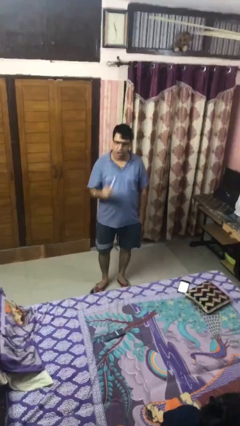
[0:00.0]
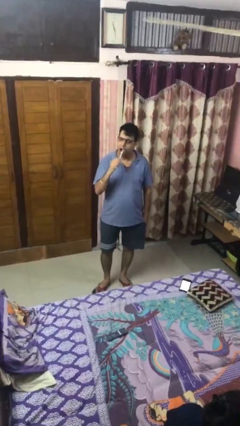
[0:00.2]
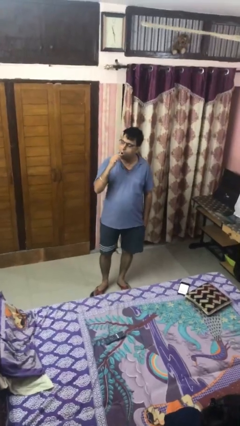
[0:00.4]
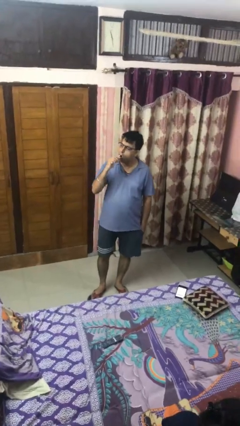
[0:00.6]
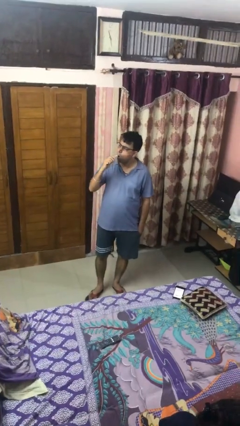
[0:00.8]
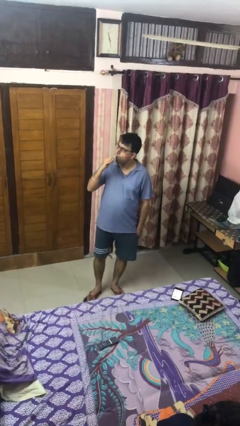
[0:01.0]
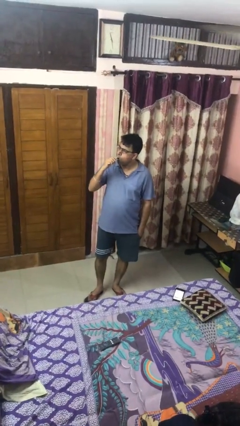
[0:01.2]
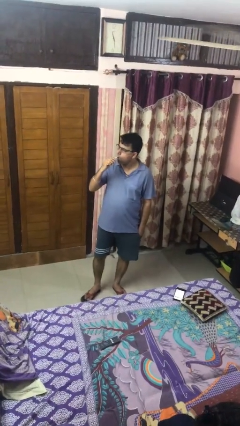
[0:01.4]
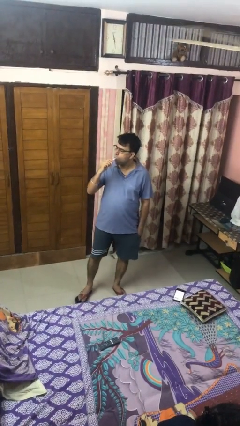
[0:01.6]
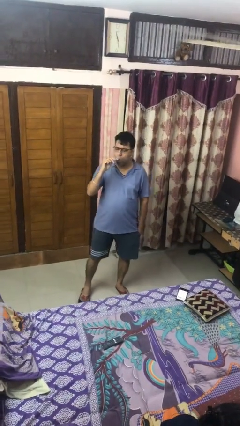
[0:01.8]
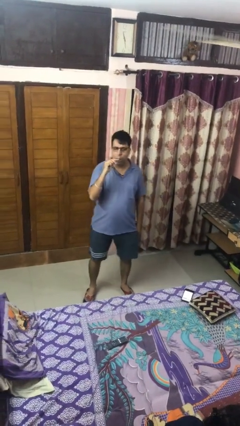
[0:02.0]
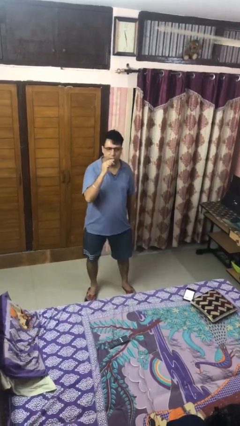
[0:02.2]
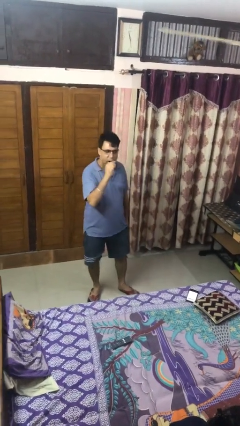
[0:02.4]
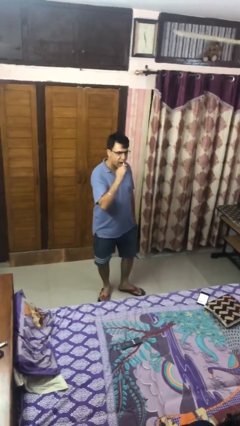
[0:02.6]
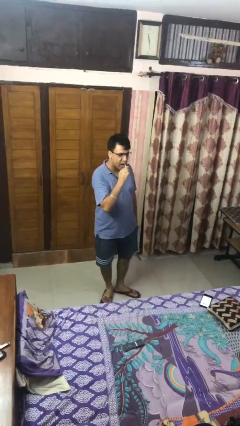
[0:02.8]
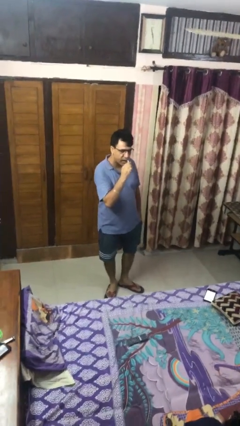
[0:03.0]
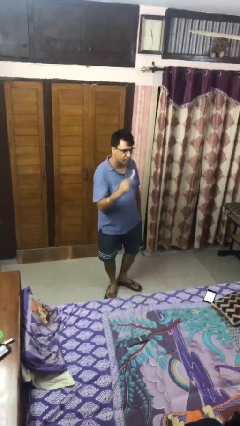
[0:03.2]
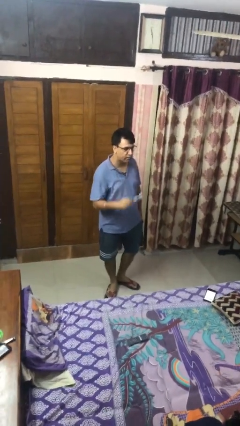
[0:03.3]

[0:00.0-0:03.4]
person brushes teeth

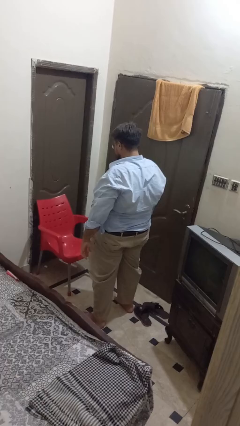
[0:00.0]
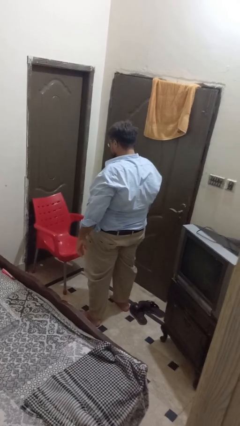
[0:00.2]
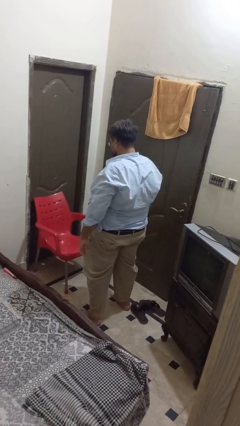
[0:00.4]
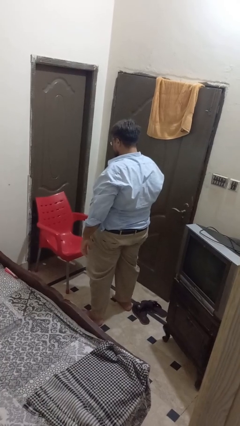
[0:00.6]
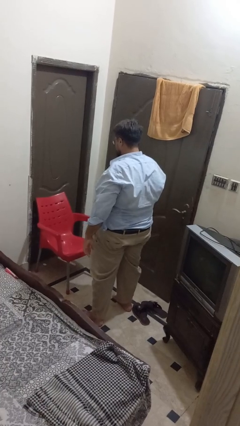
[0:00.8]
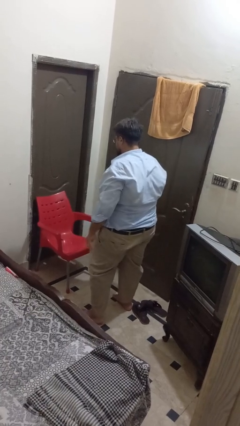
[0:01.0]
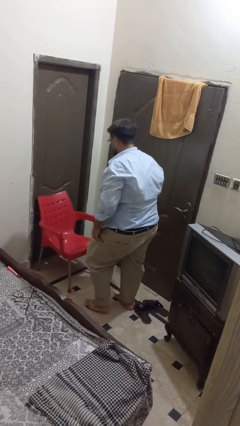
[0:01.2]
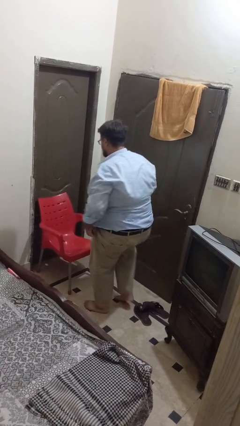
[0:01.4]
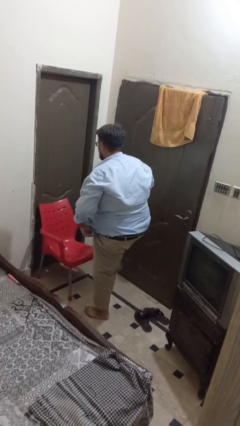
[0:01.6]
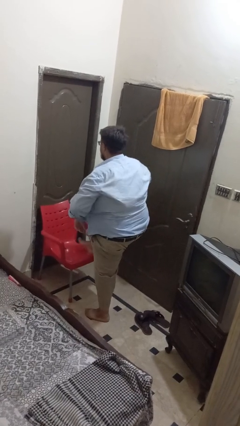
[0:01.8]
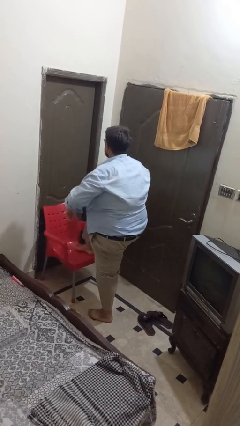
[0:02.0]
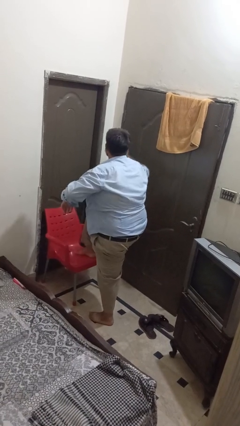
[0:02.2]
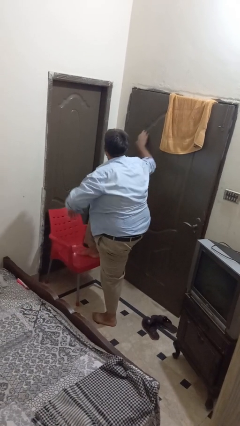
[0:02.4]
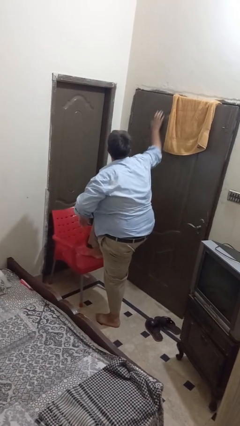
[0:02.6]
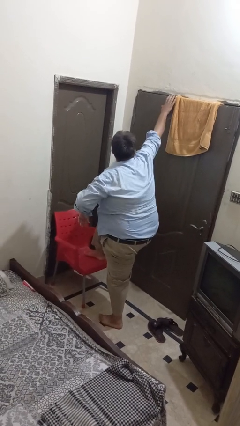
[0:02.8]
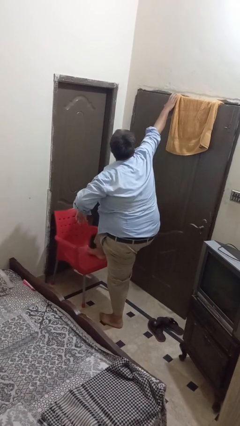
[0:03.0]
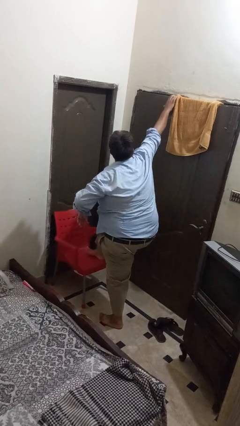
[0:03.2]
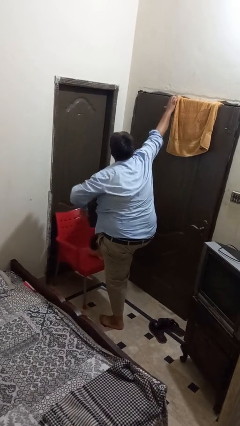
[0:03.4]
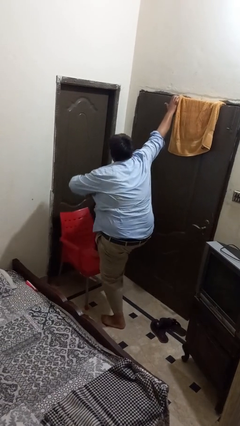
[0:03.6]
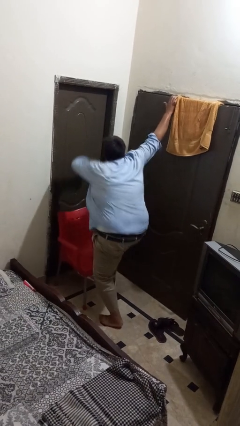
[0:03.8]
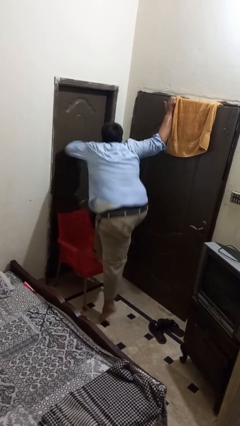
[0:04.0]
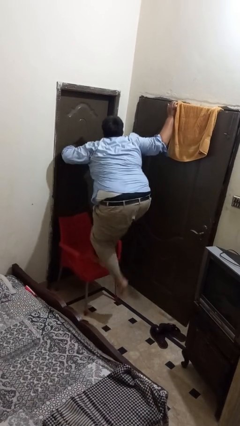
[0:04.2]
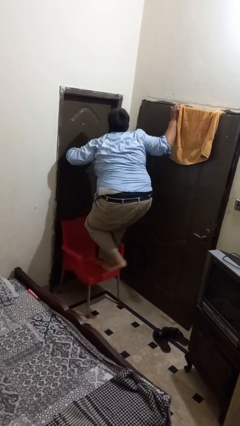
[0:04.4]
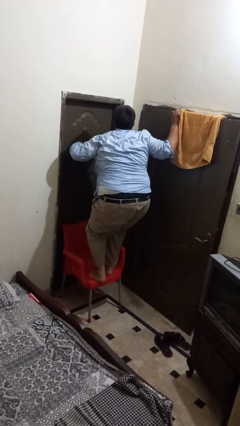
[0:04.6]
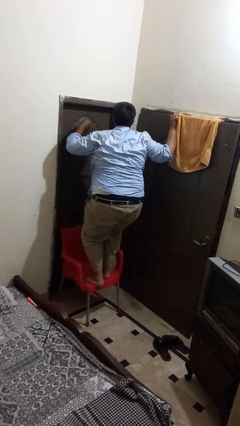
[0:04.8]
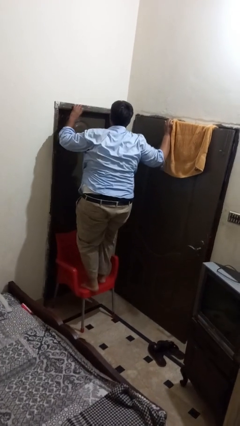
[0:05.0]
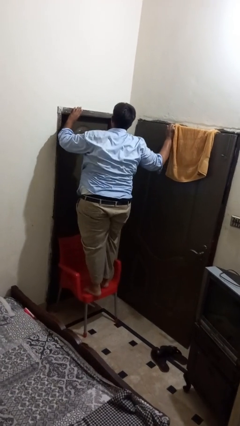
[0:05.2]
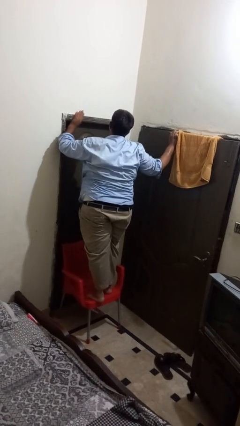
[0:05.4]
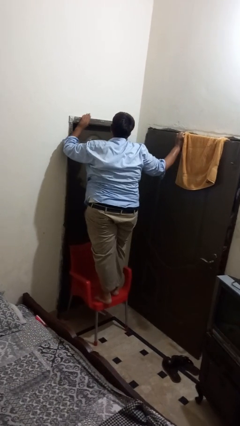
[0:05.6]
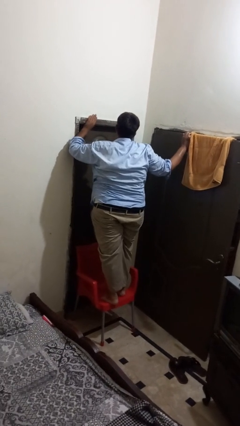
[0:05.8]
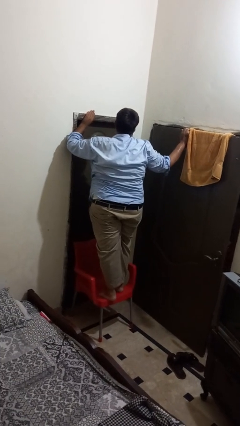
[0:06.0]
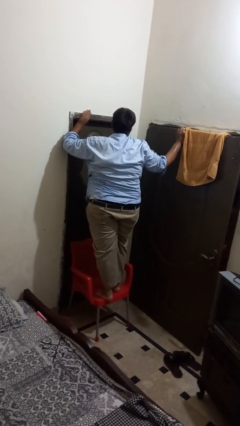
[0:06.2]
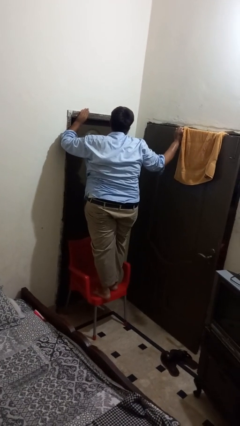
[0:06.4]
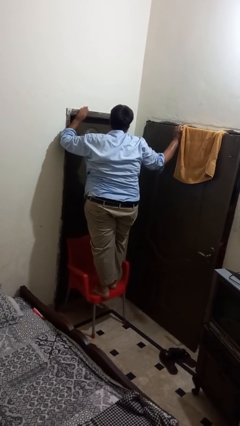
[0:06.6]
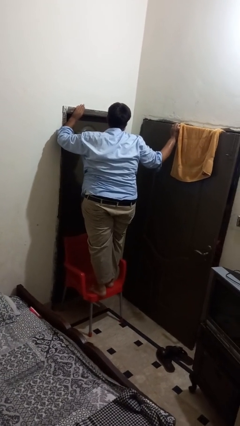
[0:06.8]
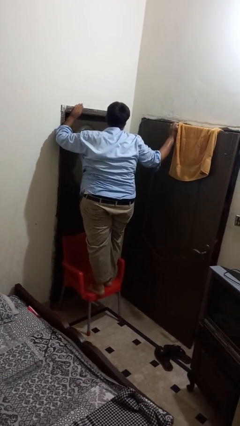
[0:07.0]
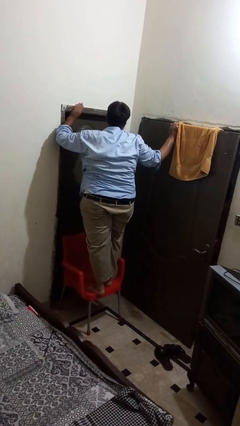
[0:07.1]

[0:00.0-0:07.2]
person climbs on chair

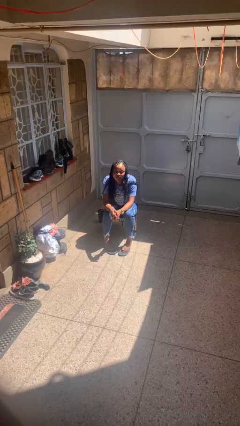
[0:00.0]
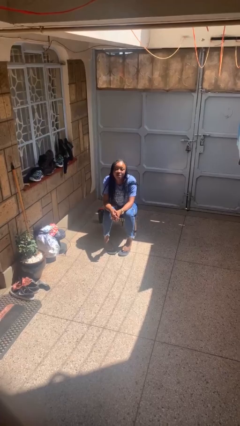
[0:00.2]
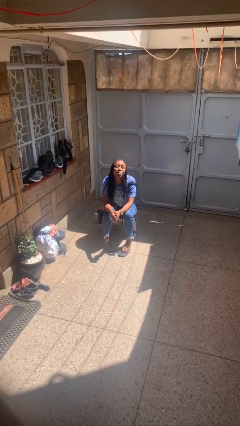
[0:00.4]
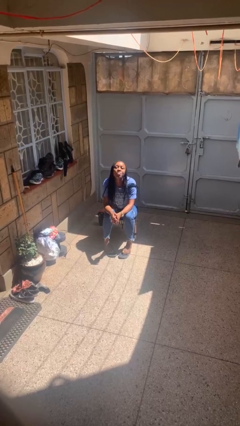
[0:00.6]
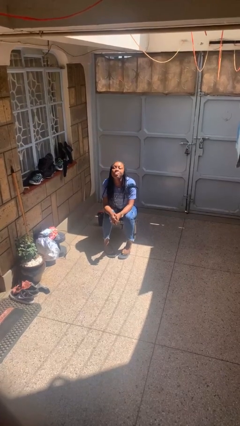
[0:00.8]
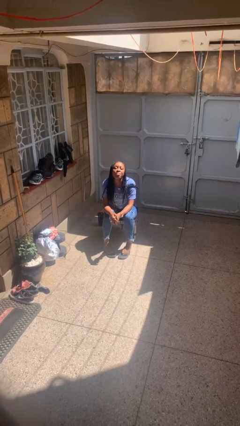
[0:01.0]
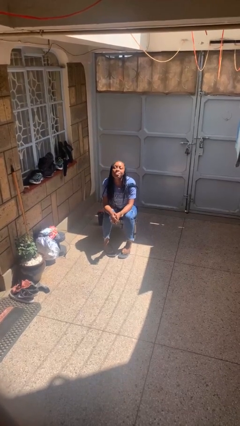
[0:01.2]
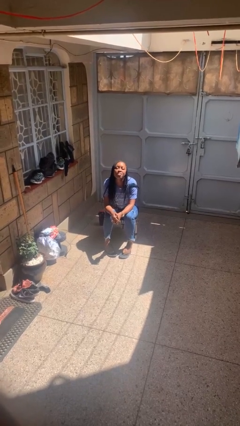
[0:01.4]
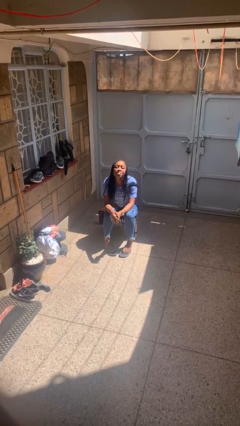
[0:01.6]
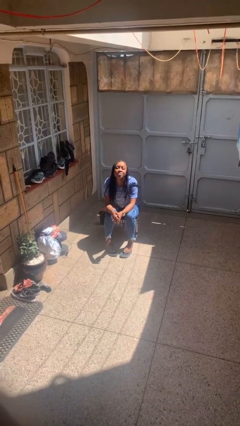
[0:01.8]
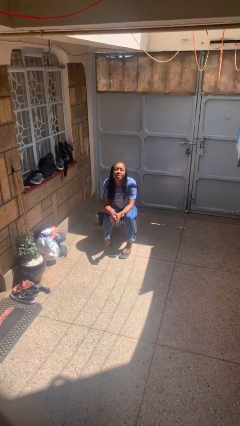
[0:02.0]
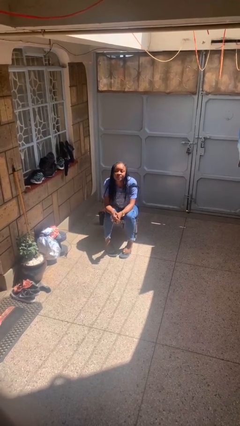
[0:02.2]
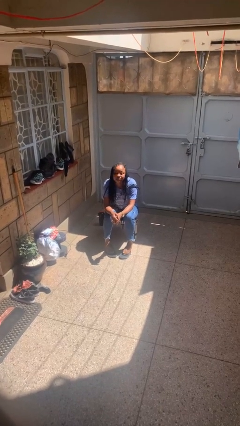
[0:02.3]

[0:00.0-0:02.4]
person sticks out tongue

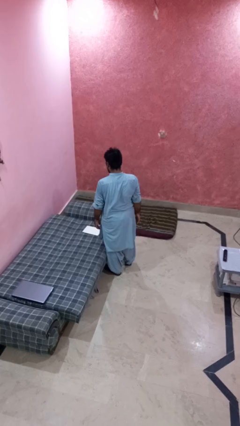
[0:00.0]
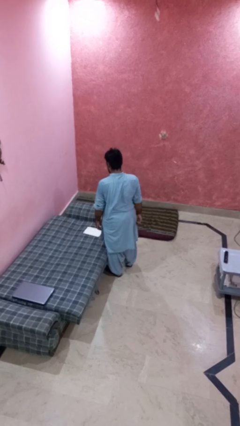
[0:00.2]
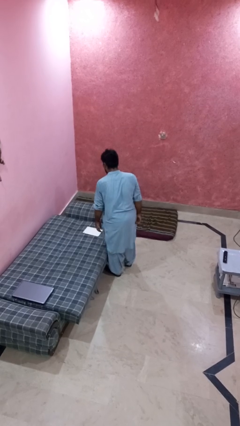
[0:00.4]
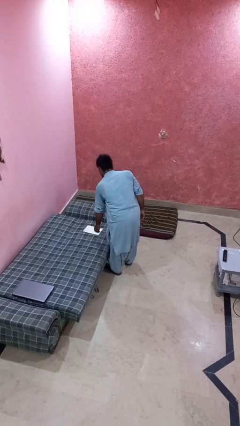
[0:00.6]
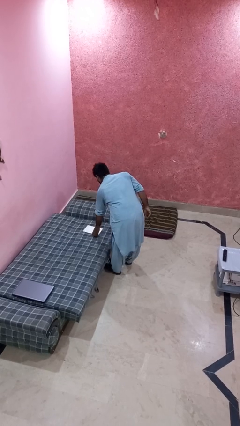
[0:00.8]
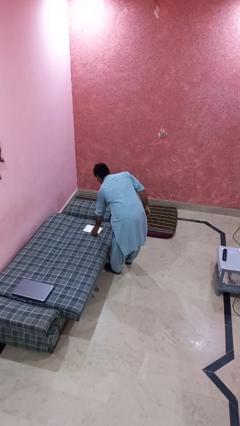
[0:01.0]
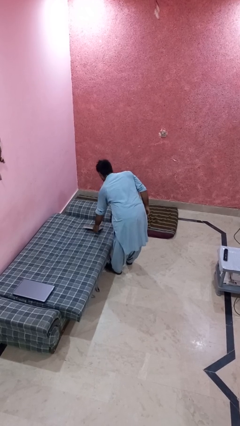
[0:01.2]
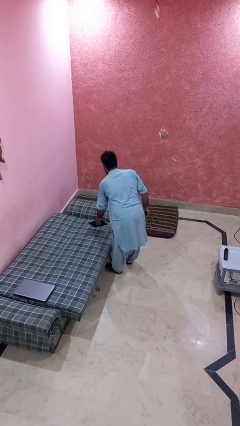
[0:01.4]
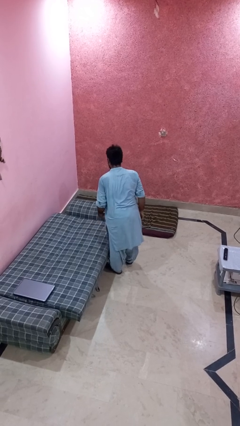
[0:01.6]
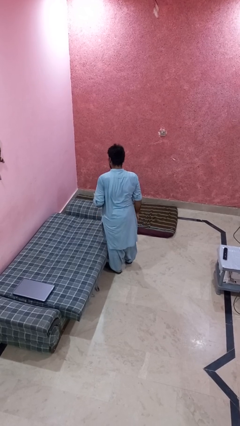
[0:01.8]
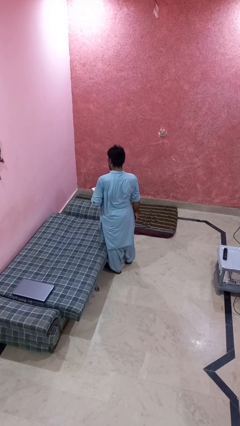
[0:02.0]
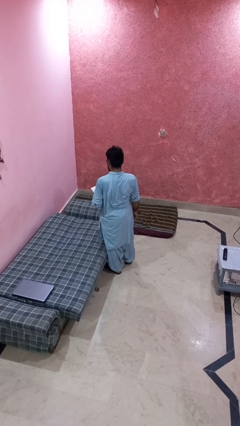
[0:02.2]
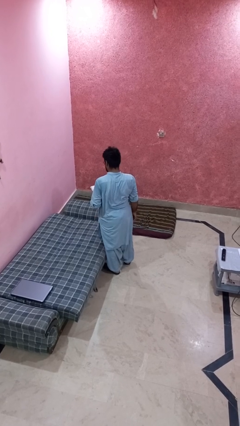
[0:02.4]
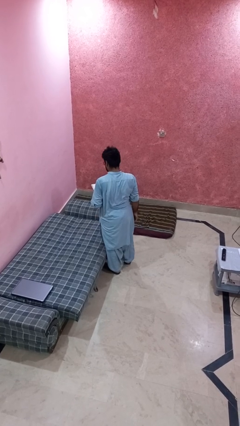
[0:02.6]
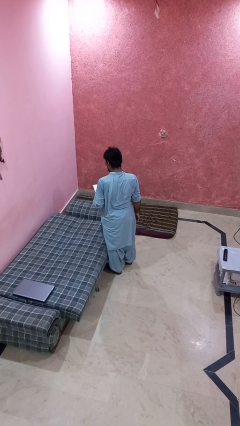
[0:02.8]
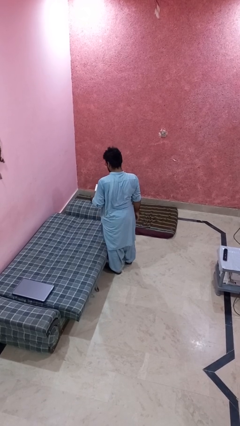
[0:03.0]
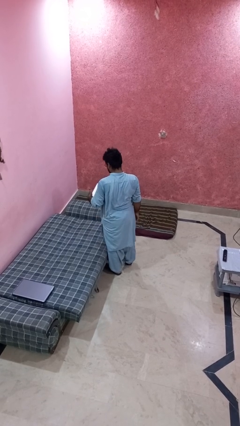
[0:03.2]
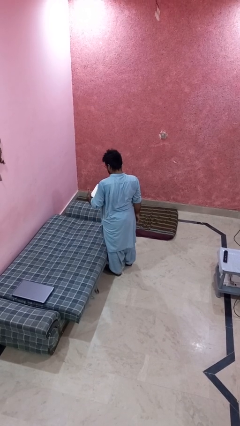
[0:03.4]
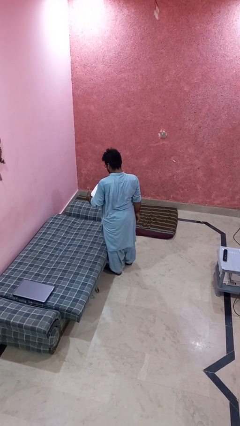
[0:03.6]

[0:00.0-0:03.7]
person picks up object from bed

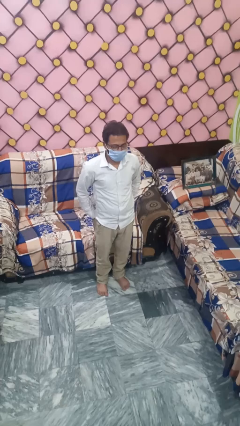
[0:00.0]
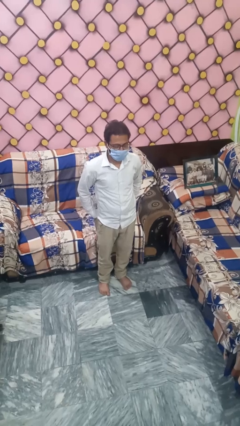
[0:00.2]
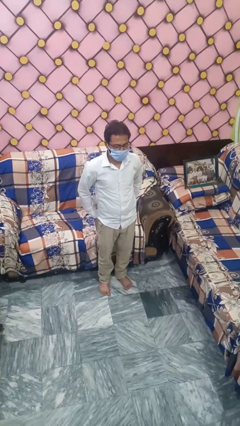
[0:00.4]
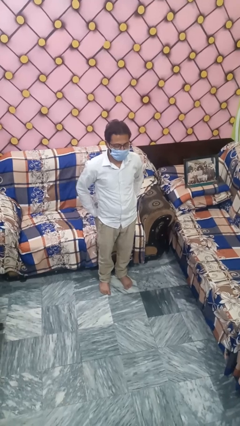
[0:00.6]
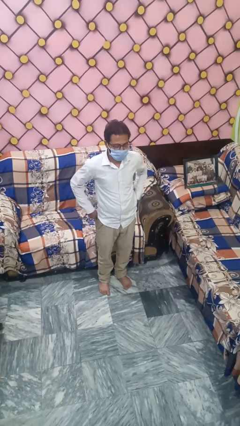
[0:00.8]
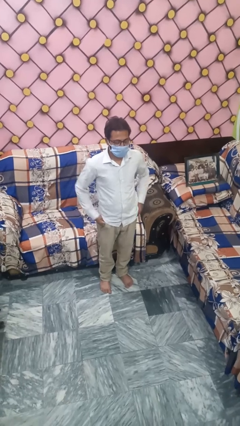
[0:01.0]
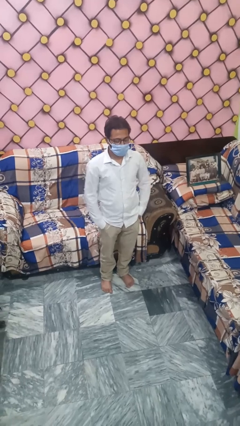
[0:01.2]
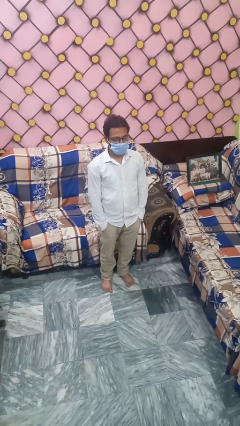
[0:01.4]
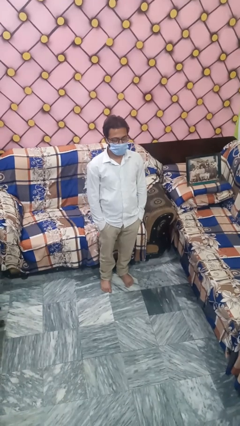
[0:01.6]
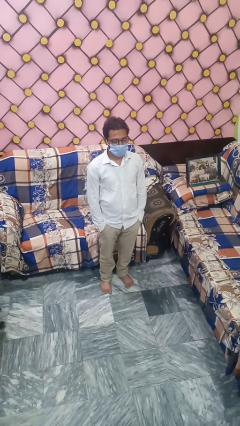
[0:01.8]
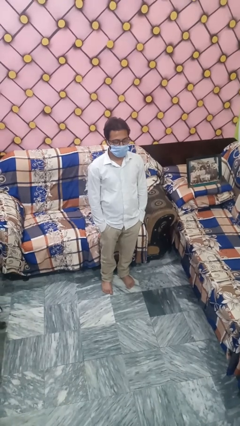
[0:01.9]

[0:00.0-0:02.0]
person puts hands in back pockets
